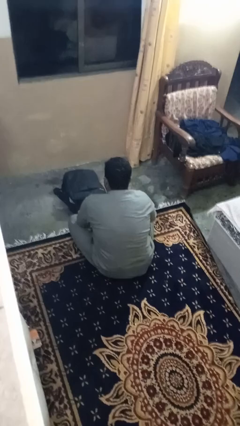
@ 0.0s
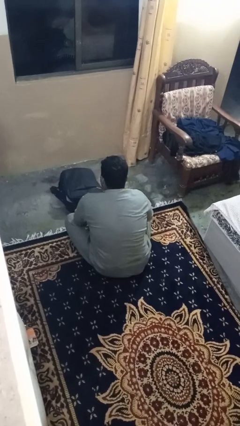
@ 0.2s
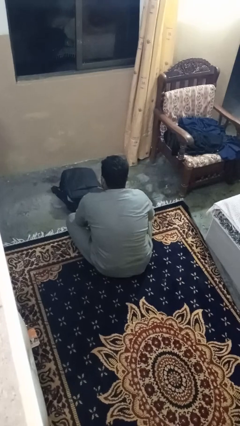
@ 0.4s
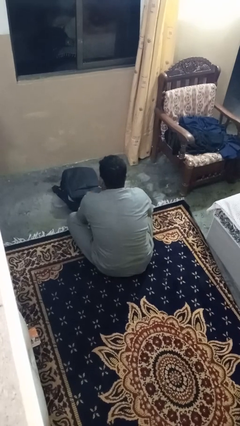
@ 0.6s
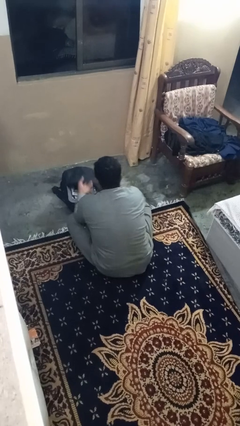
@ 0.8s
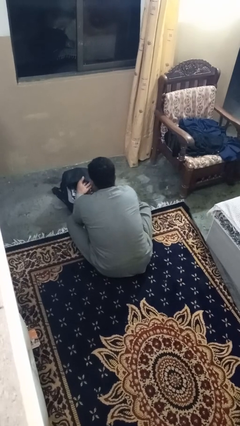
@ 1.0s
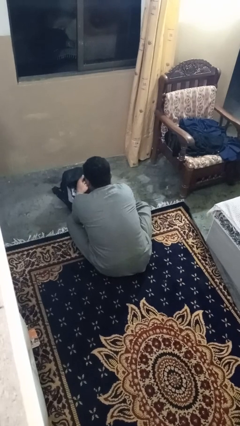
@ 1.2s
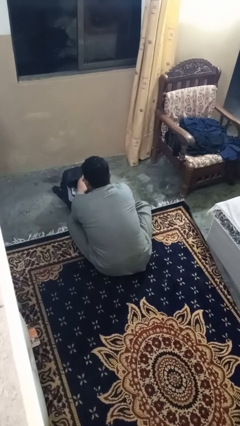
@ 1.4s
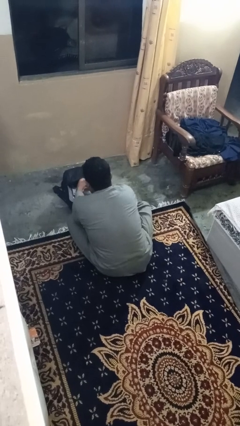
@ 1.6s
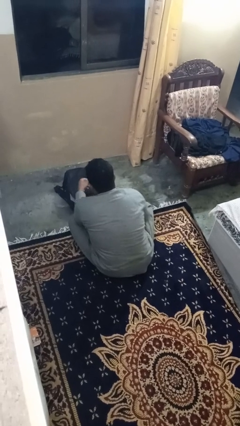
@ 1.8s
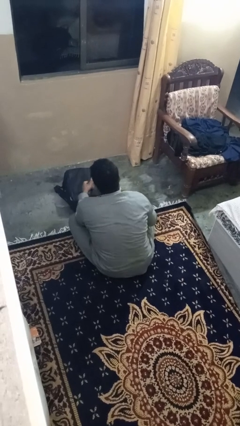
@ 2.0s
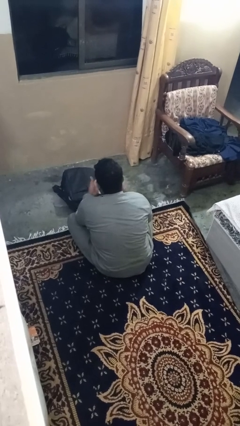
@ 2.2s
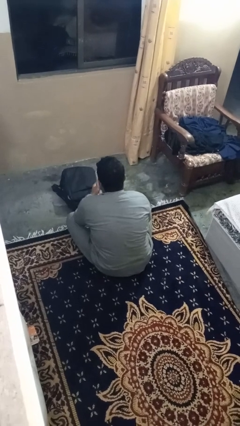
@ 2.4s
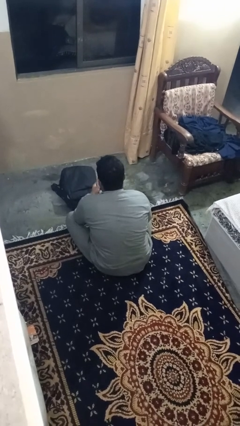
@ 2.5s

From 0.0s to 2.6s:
person takes object from bag

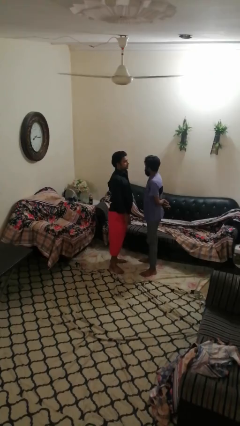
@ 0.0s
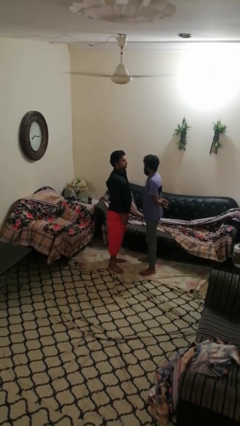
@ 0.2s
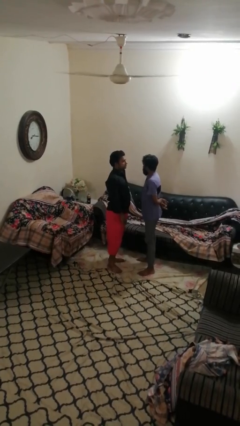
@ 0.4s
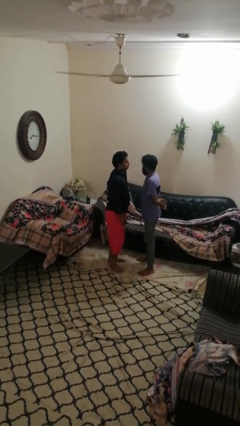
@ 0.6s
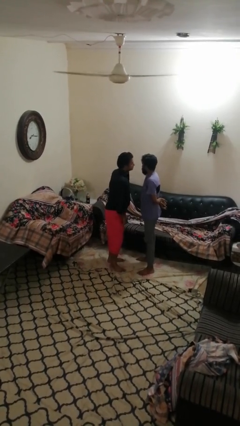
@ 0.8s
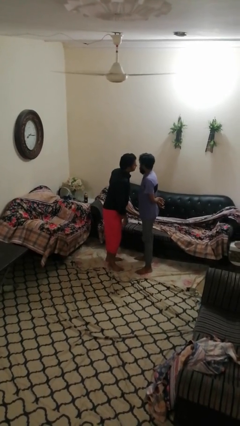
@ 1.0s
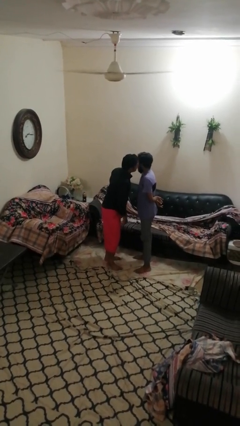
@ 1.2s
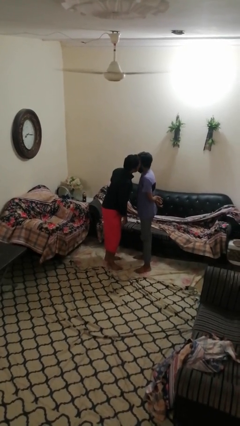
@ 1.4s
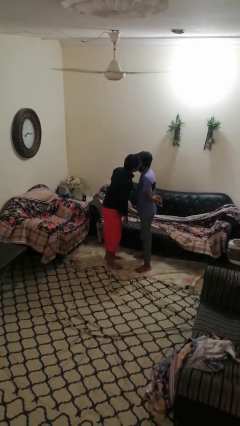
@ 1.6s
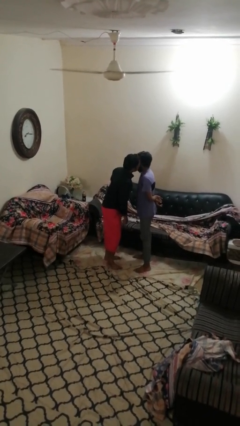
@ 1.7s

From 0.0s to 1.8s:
person kisses cheek of person

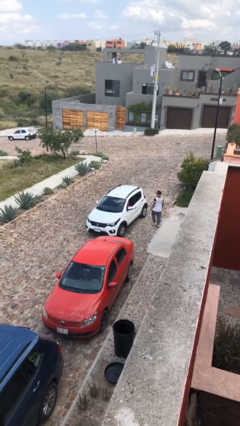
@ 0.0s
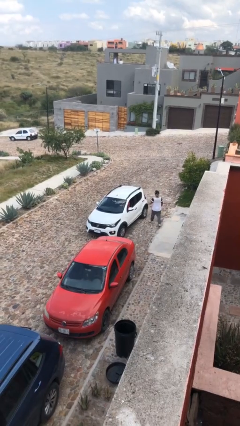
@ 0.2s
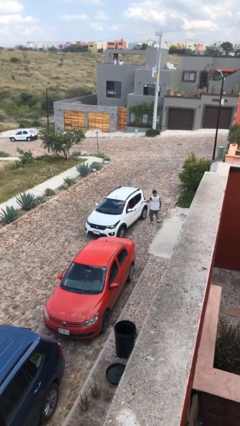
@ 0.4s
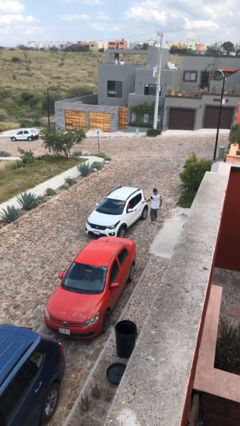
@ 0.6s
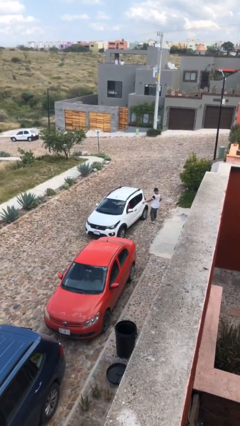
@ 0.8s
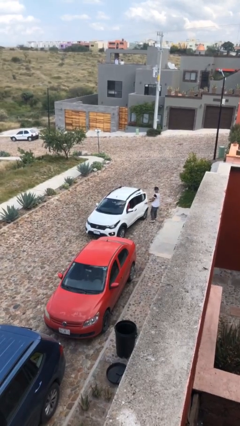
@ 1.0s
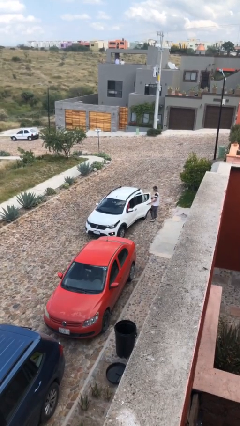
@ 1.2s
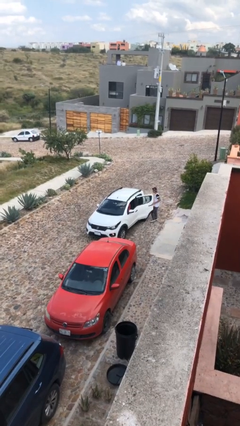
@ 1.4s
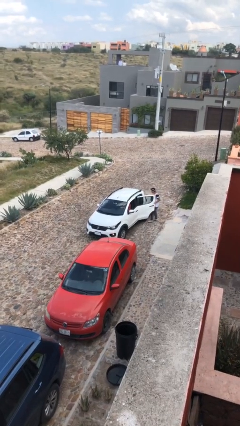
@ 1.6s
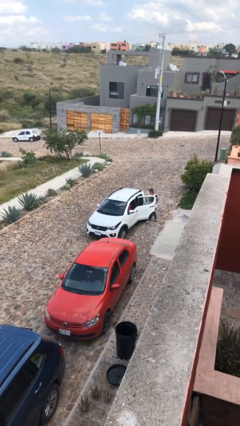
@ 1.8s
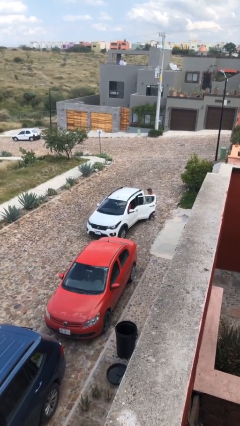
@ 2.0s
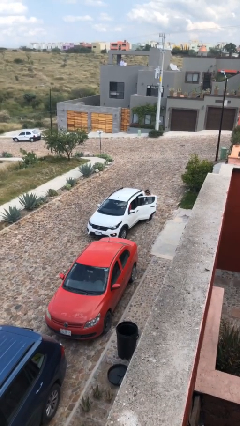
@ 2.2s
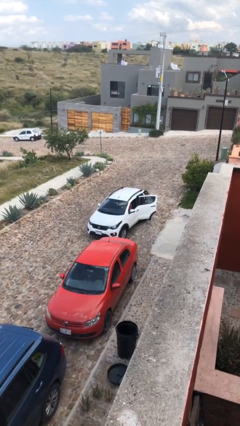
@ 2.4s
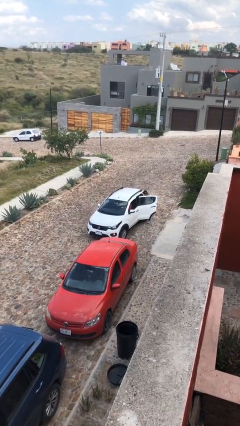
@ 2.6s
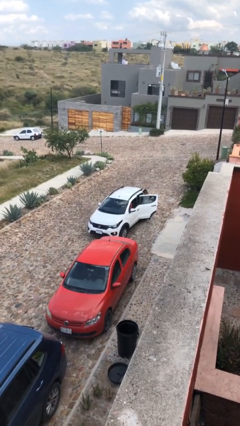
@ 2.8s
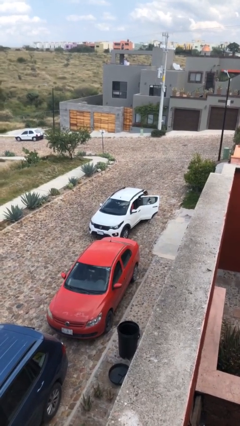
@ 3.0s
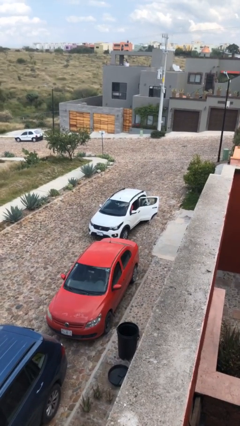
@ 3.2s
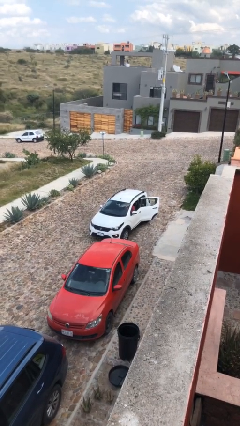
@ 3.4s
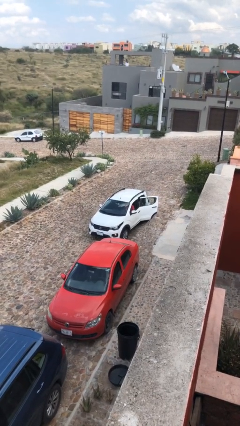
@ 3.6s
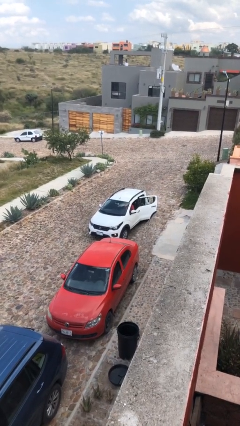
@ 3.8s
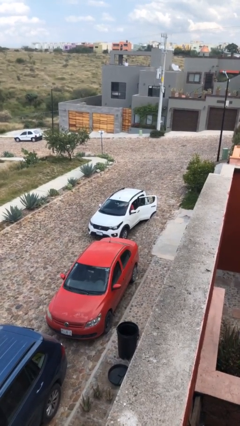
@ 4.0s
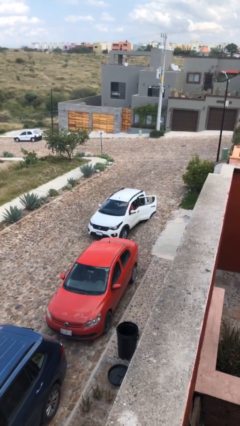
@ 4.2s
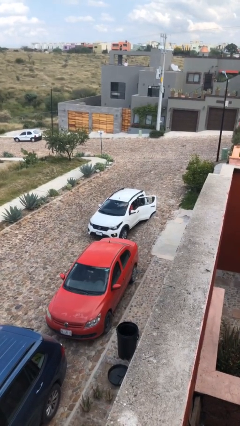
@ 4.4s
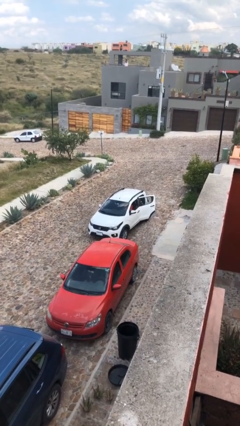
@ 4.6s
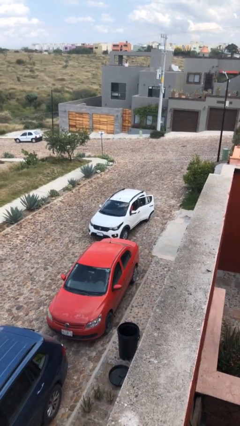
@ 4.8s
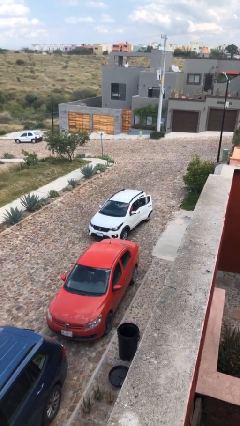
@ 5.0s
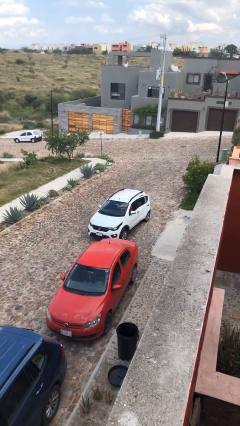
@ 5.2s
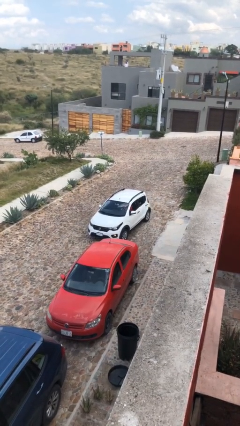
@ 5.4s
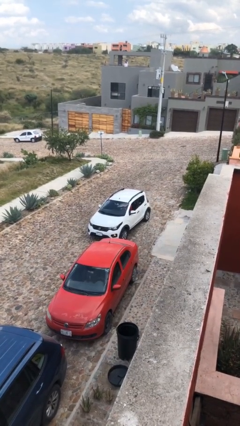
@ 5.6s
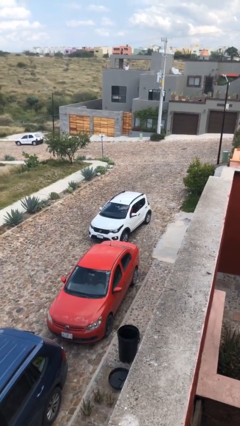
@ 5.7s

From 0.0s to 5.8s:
car picks up person

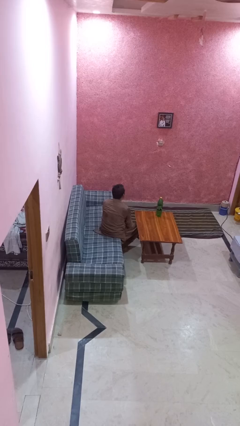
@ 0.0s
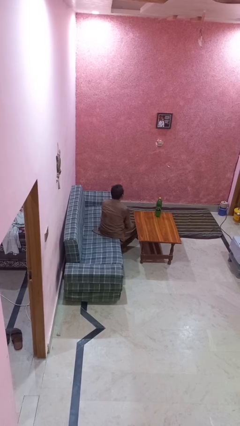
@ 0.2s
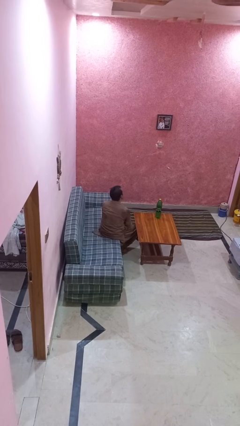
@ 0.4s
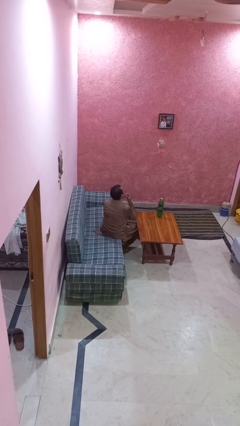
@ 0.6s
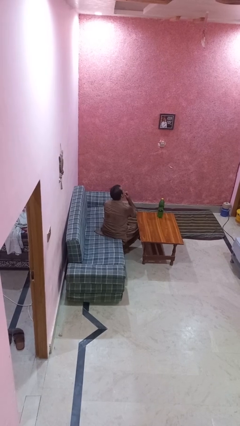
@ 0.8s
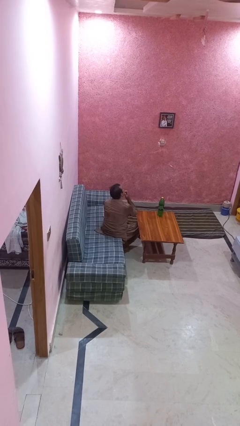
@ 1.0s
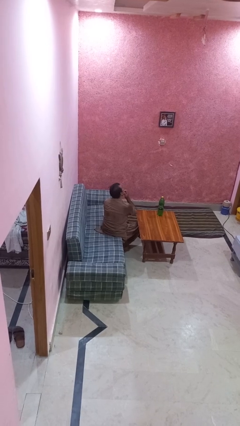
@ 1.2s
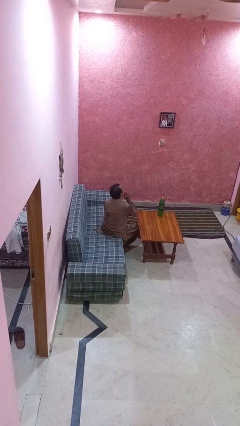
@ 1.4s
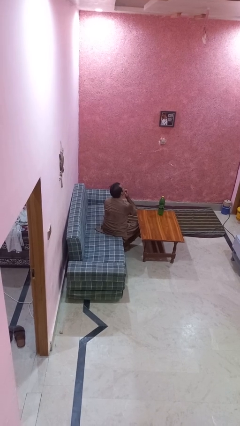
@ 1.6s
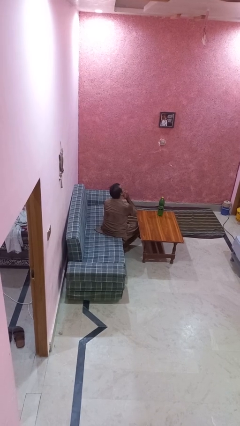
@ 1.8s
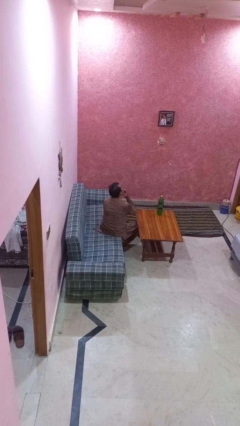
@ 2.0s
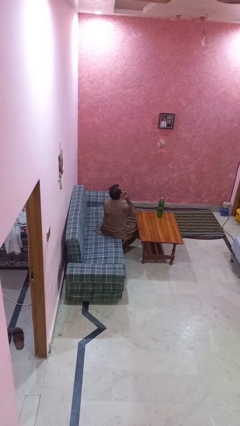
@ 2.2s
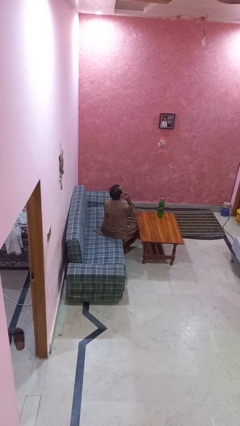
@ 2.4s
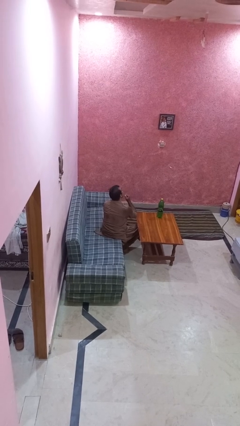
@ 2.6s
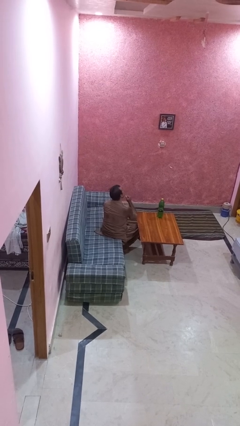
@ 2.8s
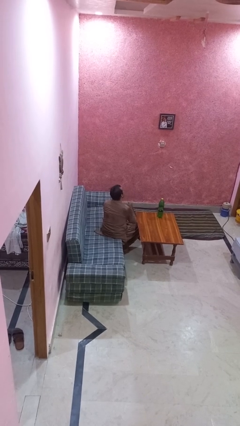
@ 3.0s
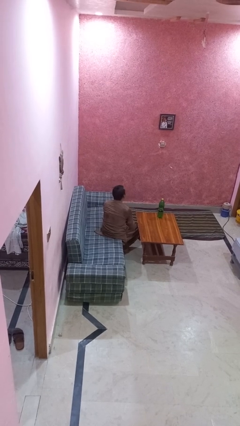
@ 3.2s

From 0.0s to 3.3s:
person strokes chin

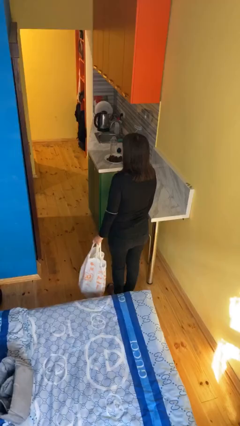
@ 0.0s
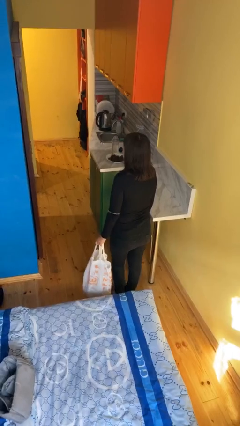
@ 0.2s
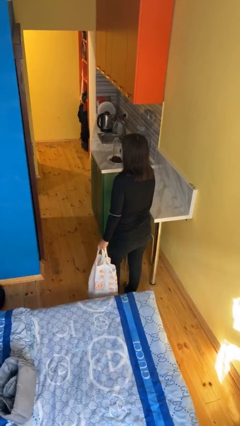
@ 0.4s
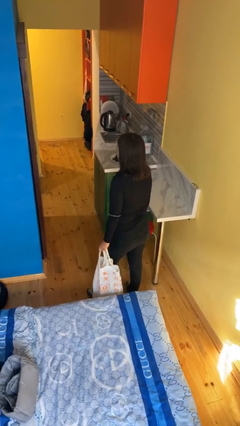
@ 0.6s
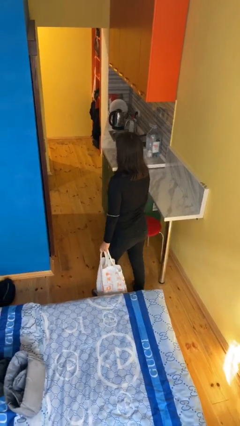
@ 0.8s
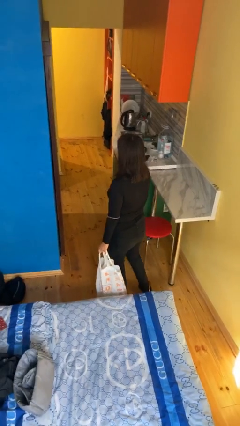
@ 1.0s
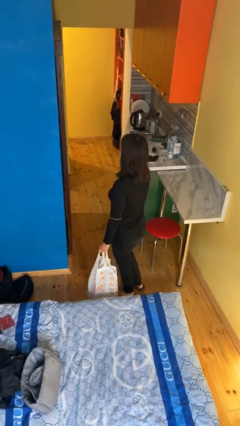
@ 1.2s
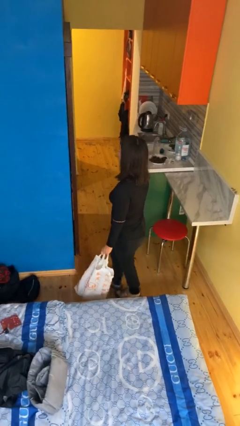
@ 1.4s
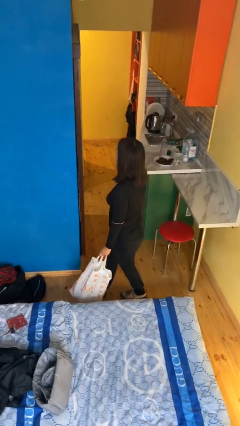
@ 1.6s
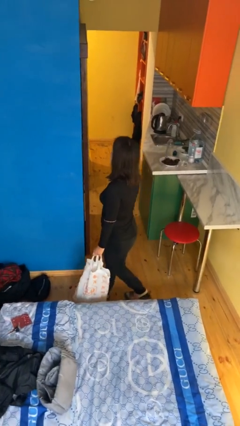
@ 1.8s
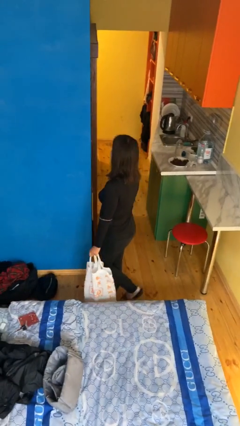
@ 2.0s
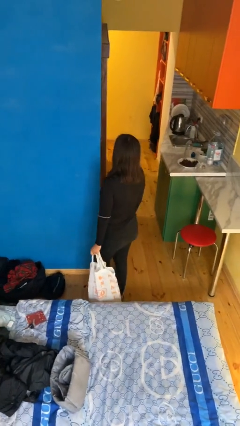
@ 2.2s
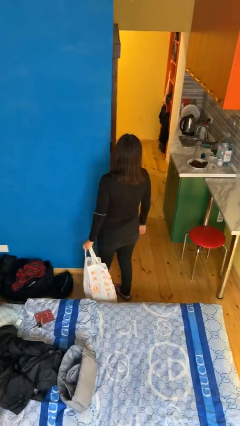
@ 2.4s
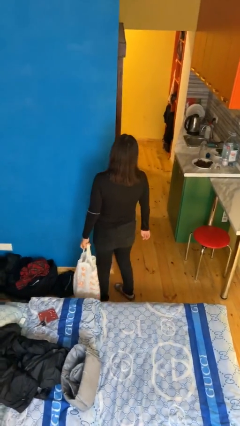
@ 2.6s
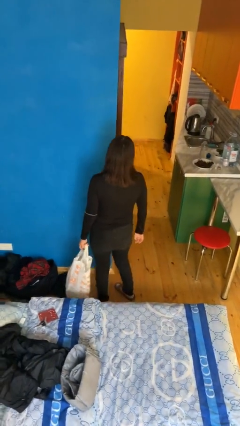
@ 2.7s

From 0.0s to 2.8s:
person carries groceries

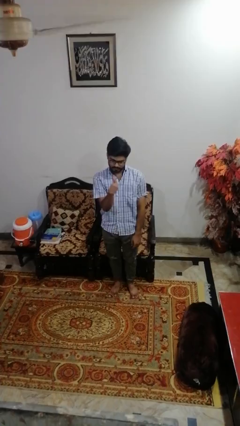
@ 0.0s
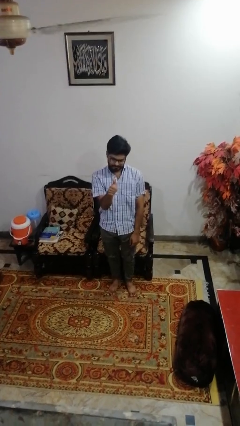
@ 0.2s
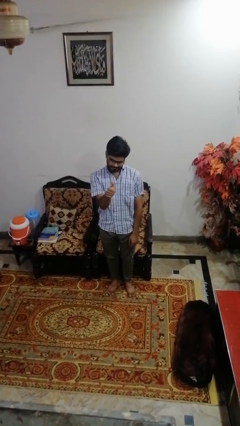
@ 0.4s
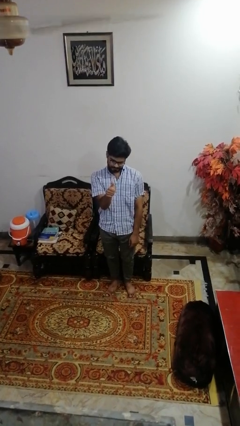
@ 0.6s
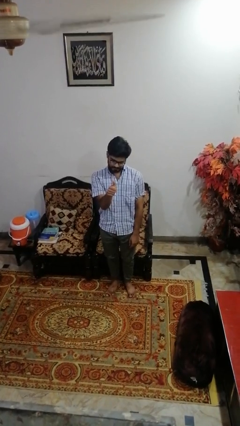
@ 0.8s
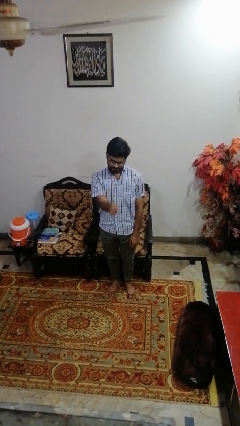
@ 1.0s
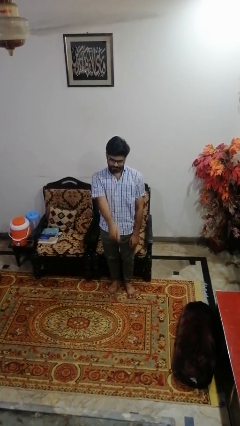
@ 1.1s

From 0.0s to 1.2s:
person gestures thumbs up
